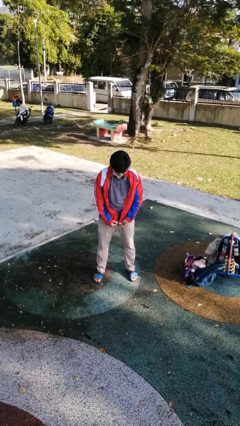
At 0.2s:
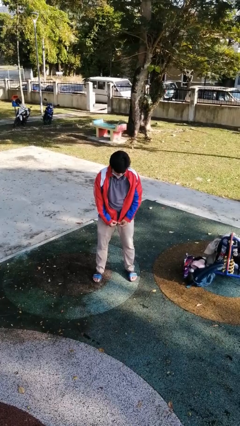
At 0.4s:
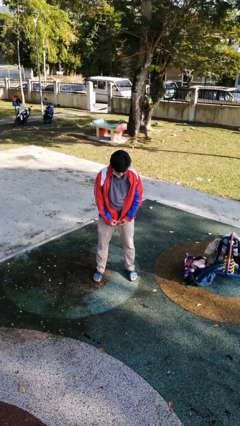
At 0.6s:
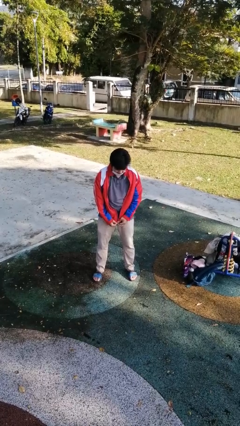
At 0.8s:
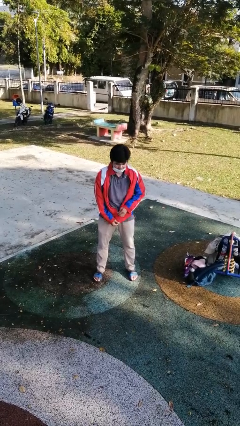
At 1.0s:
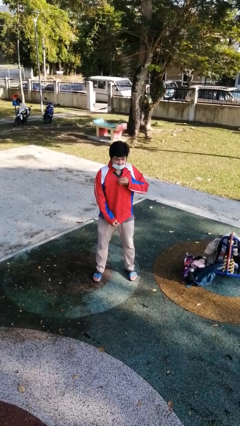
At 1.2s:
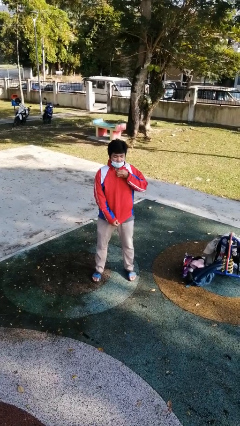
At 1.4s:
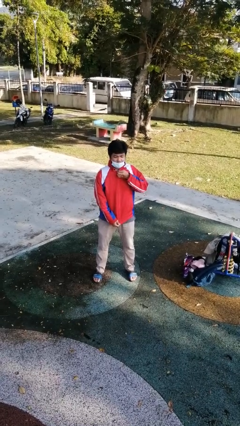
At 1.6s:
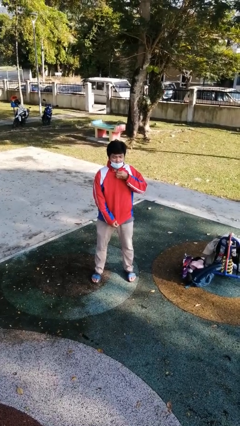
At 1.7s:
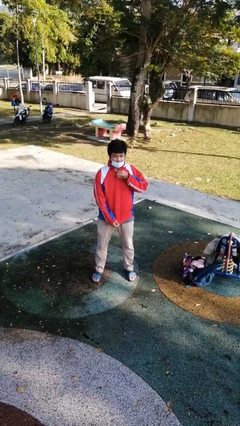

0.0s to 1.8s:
person zips up jacket

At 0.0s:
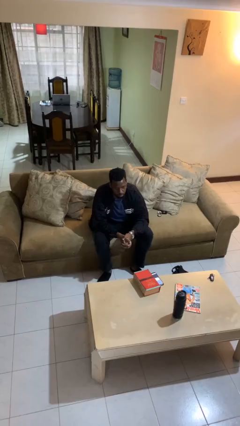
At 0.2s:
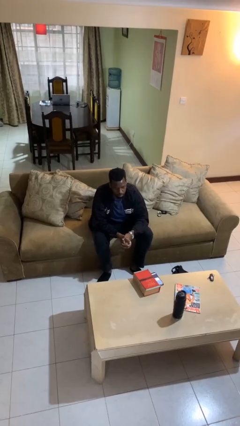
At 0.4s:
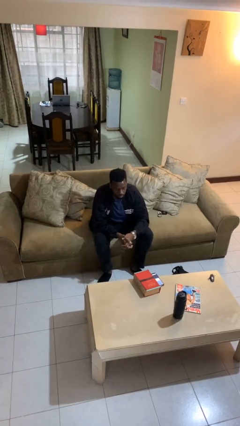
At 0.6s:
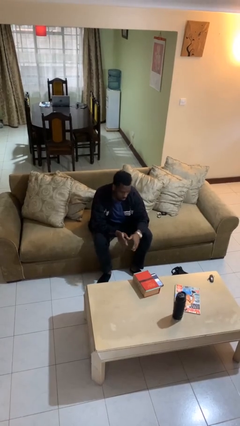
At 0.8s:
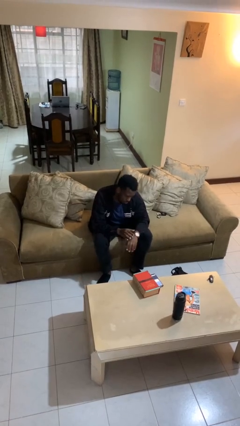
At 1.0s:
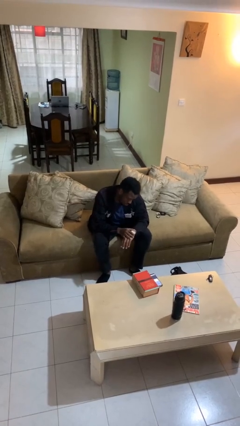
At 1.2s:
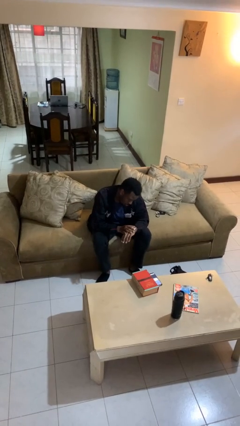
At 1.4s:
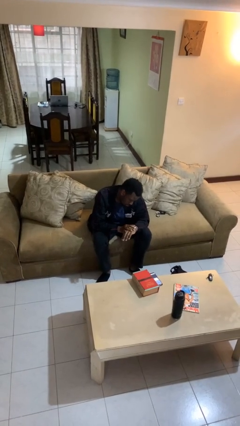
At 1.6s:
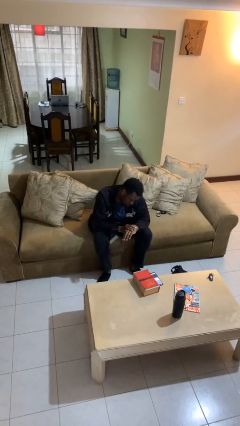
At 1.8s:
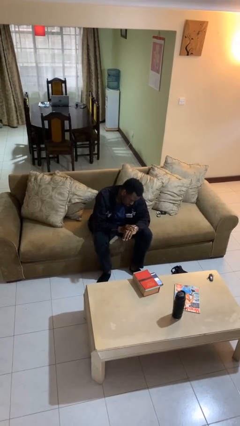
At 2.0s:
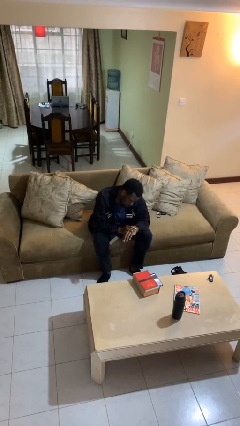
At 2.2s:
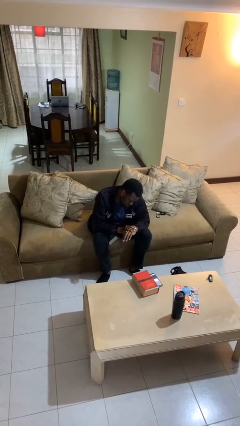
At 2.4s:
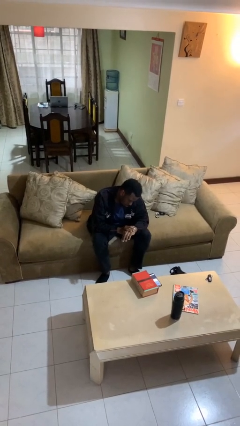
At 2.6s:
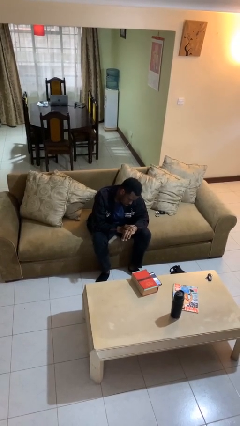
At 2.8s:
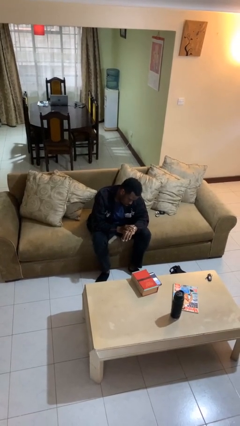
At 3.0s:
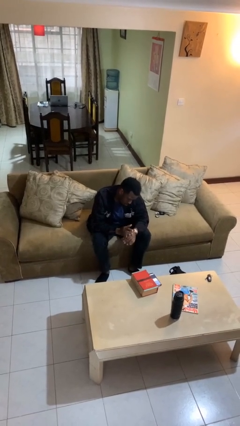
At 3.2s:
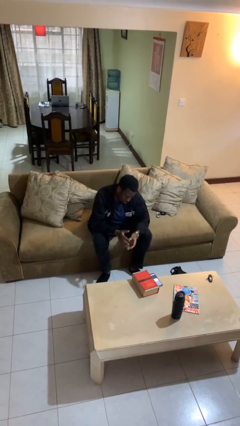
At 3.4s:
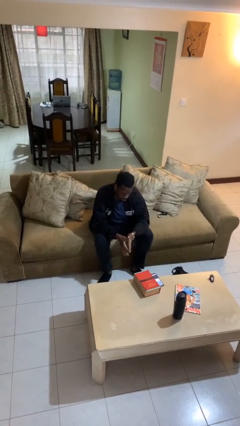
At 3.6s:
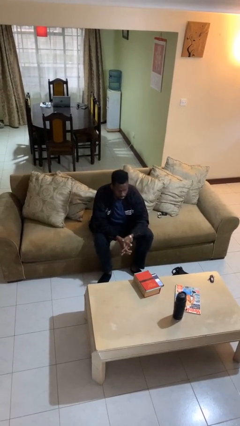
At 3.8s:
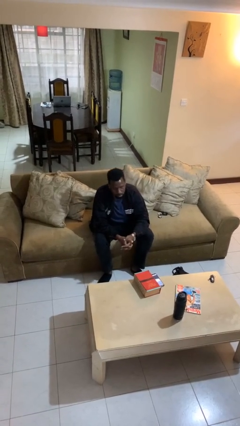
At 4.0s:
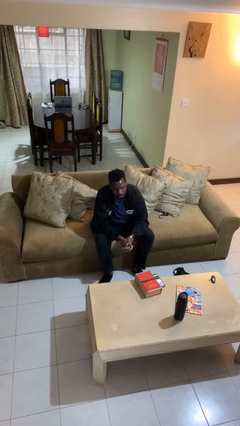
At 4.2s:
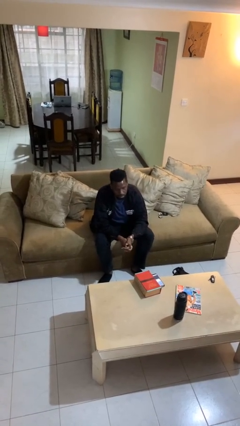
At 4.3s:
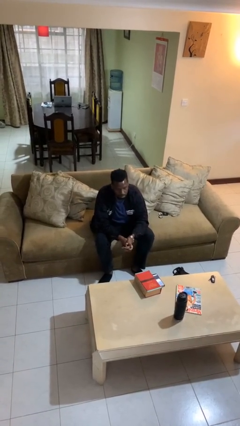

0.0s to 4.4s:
person looks at wristwatch

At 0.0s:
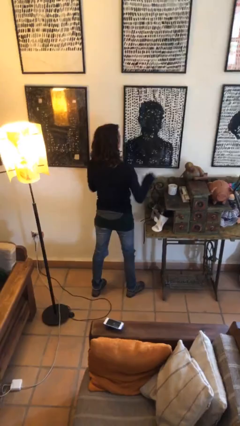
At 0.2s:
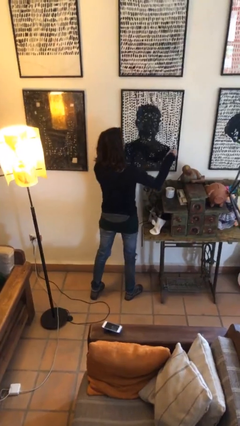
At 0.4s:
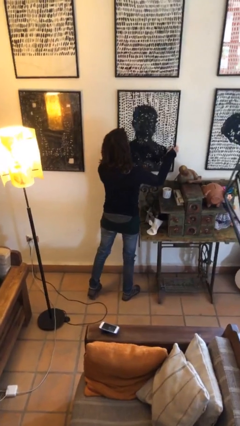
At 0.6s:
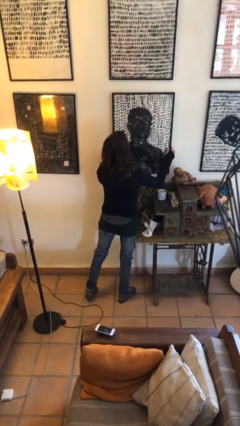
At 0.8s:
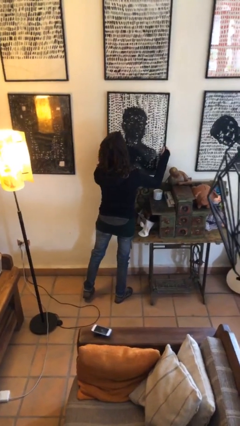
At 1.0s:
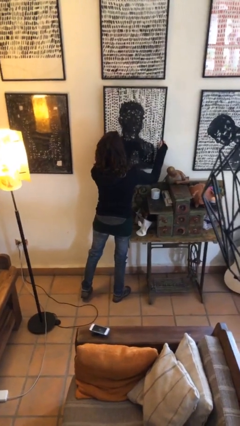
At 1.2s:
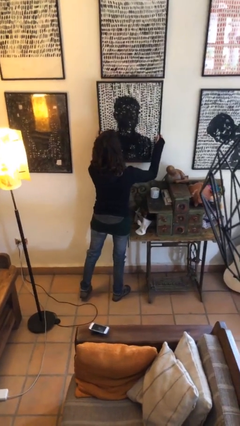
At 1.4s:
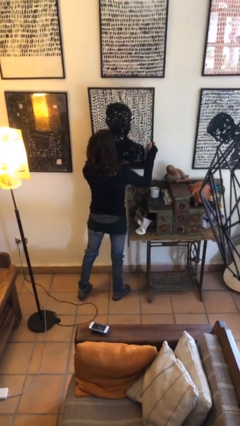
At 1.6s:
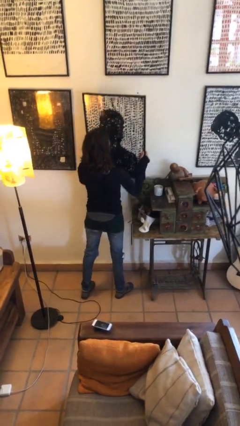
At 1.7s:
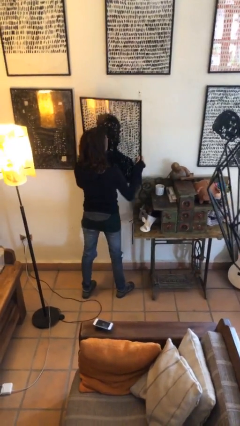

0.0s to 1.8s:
person takes down picture frame

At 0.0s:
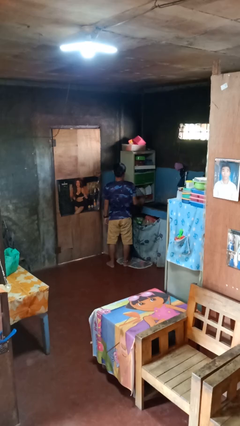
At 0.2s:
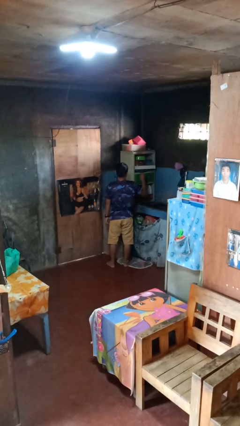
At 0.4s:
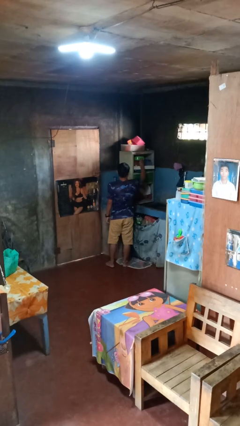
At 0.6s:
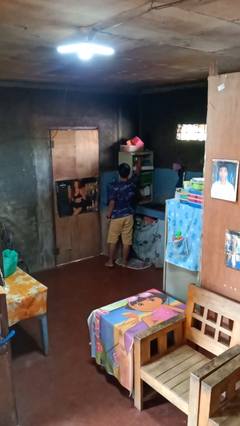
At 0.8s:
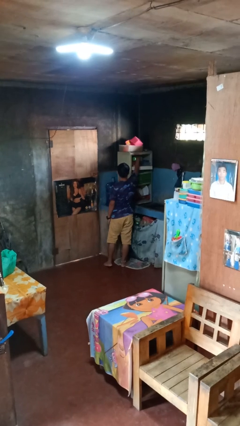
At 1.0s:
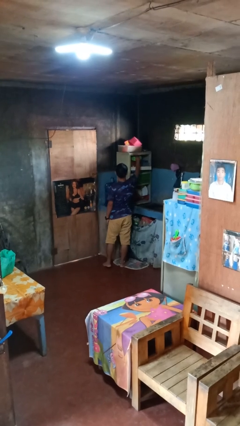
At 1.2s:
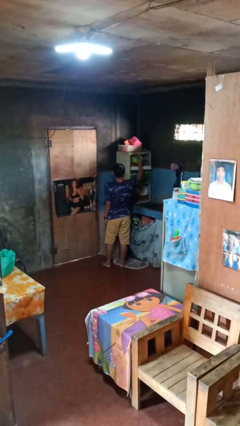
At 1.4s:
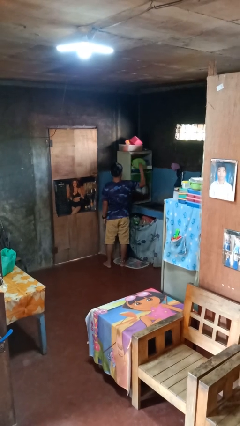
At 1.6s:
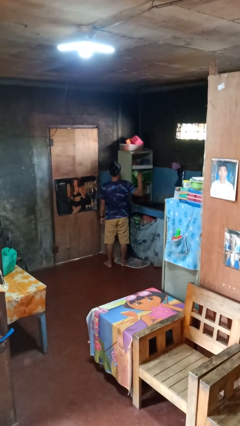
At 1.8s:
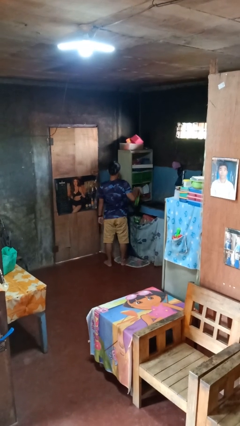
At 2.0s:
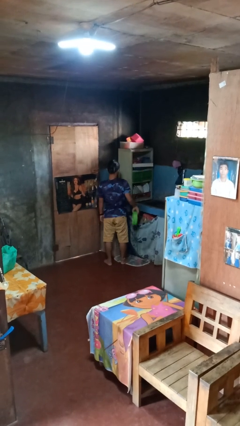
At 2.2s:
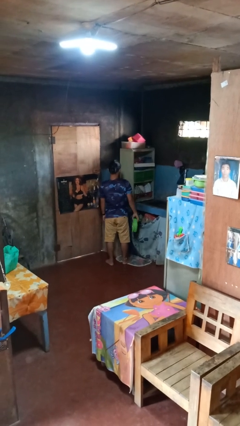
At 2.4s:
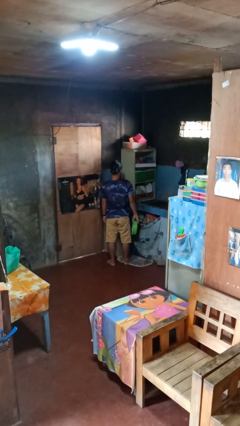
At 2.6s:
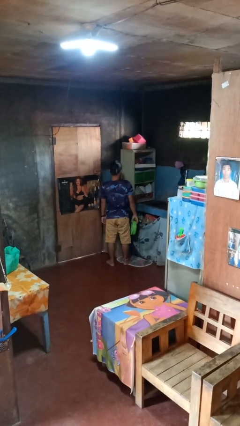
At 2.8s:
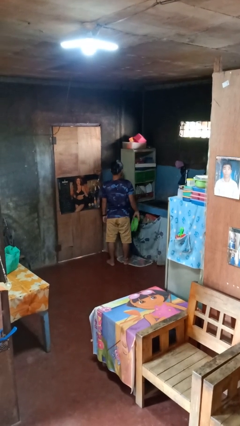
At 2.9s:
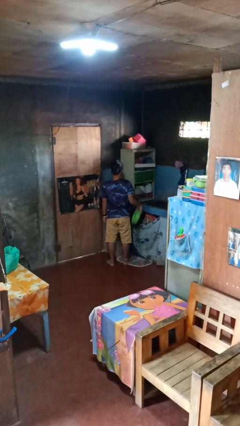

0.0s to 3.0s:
person takes object from cabinet

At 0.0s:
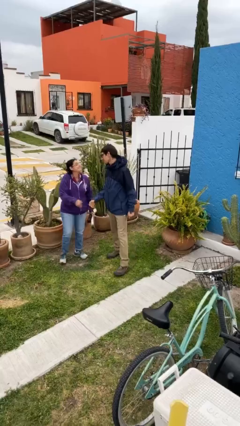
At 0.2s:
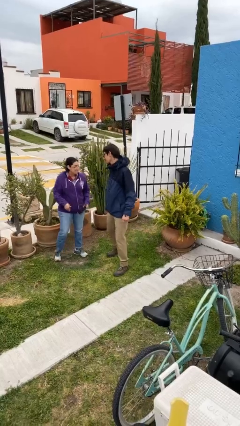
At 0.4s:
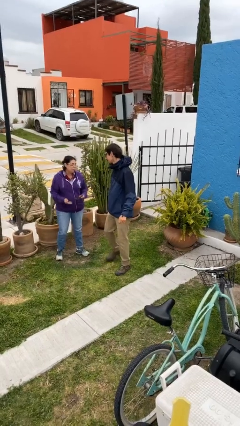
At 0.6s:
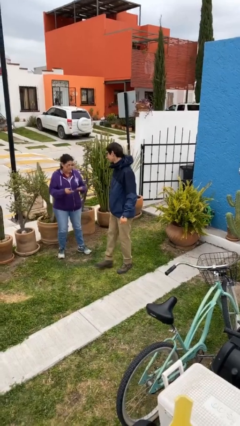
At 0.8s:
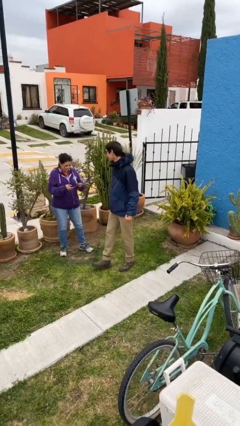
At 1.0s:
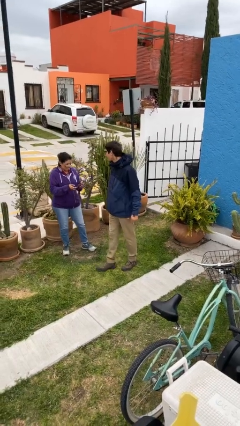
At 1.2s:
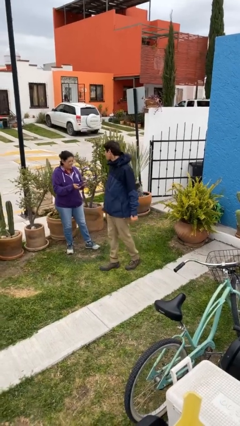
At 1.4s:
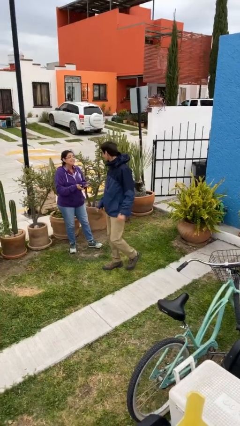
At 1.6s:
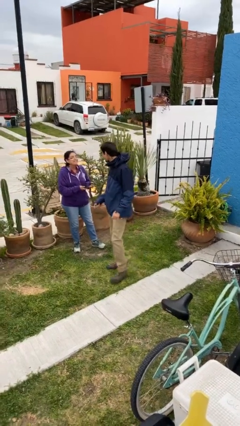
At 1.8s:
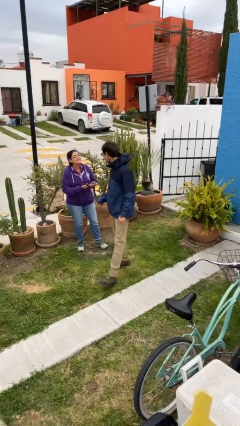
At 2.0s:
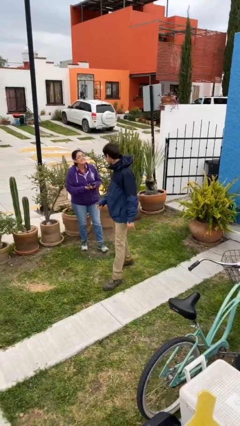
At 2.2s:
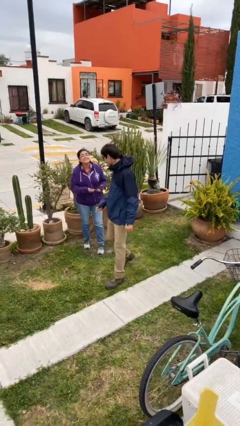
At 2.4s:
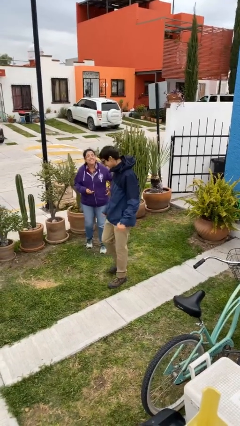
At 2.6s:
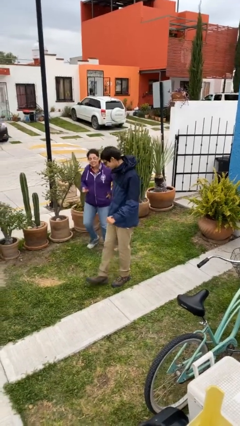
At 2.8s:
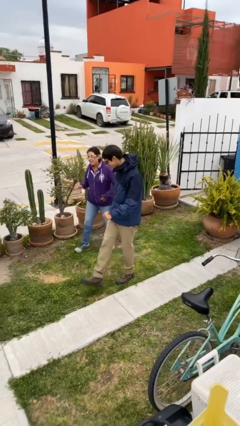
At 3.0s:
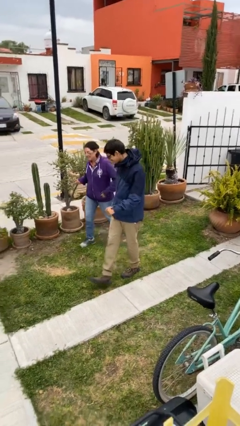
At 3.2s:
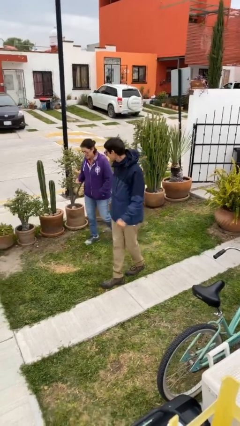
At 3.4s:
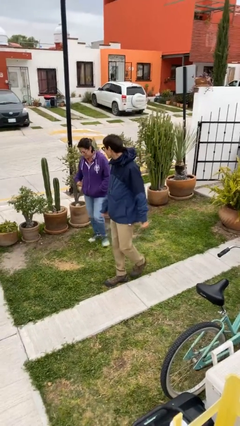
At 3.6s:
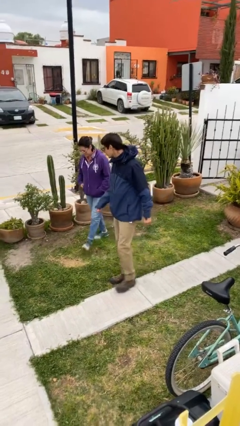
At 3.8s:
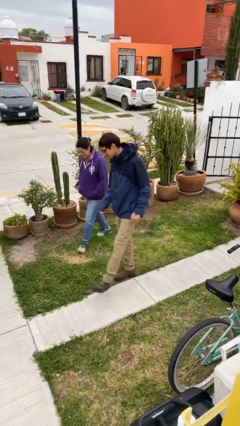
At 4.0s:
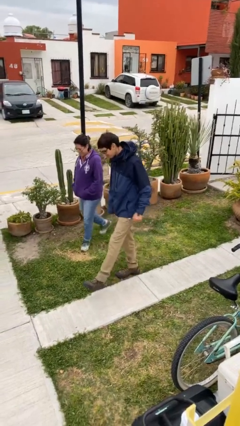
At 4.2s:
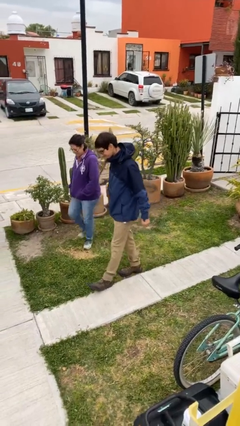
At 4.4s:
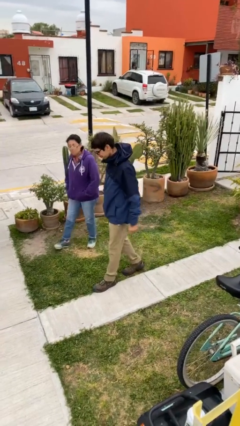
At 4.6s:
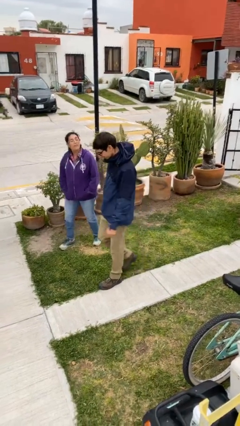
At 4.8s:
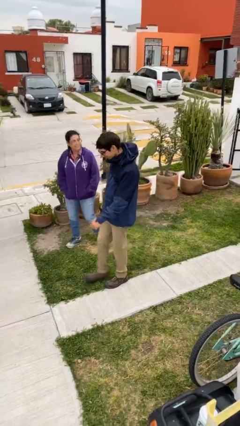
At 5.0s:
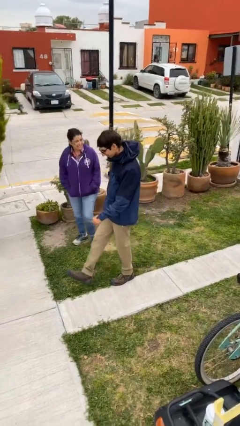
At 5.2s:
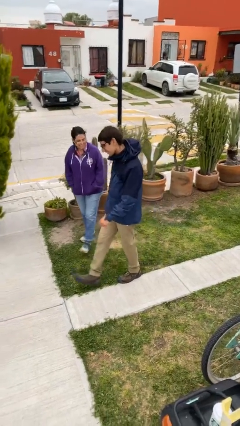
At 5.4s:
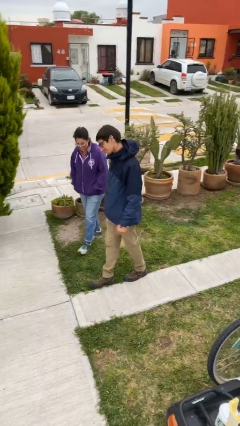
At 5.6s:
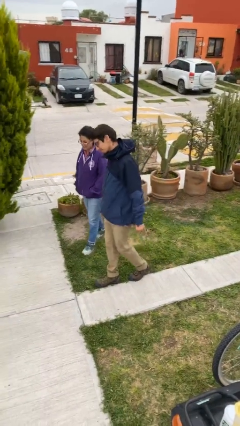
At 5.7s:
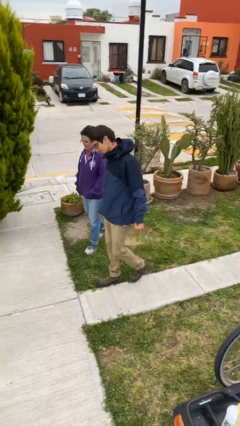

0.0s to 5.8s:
person talks to person

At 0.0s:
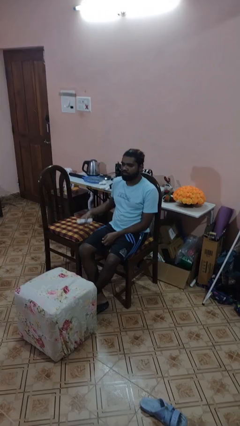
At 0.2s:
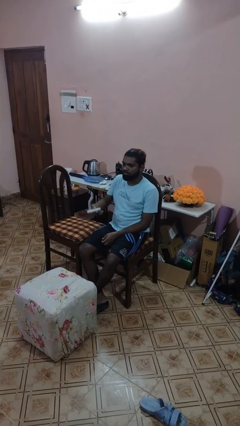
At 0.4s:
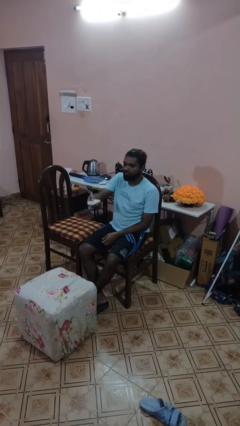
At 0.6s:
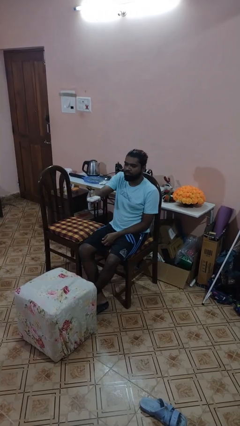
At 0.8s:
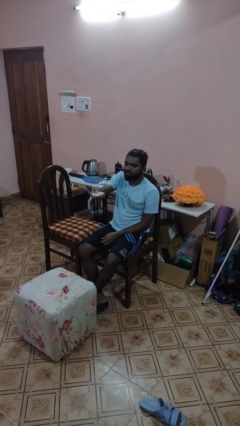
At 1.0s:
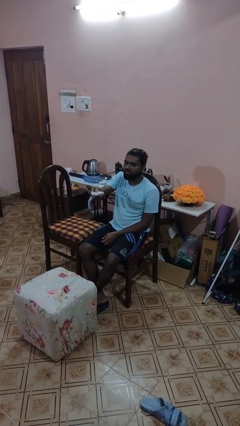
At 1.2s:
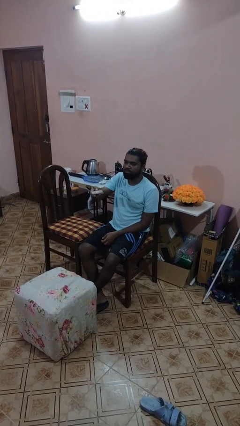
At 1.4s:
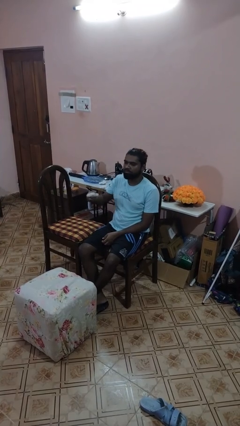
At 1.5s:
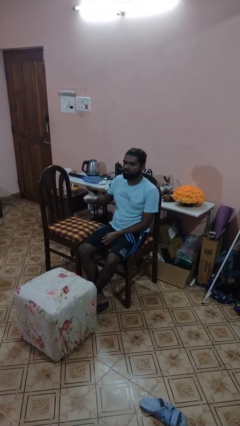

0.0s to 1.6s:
person uses television remote
